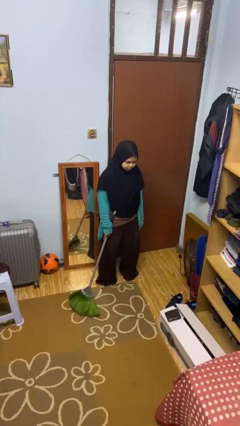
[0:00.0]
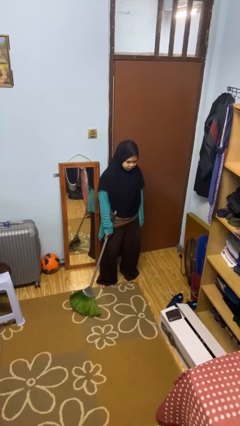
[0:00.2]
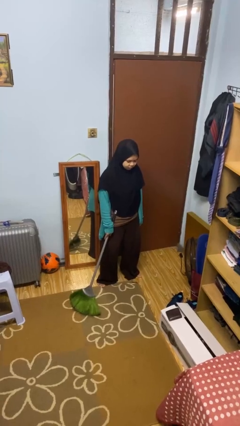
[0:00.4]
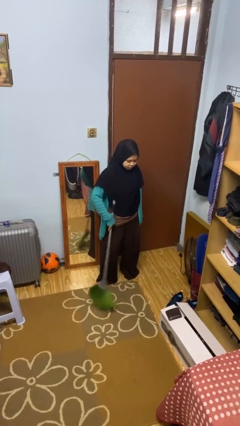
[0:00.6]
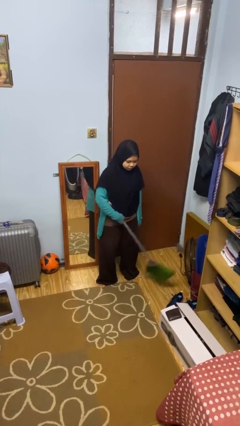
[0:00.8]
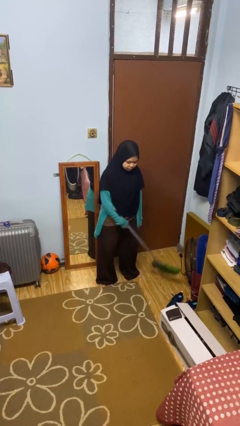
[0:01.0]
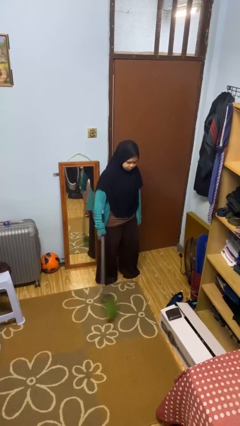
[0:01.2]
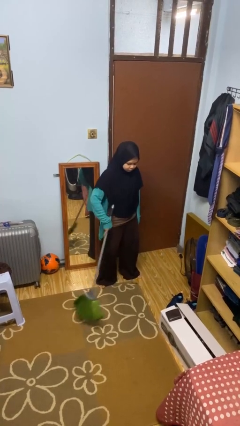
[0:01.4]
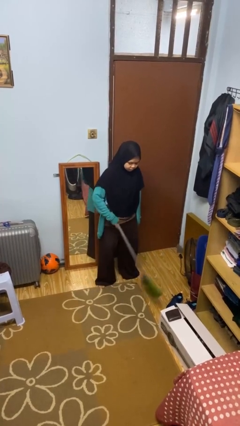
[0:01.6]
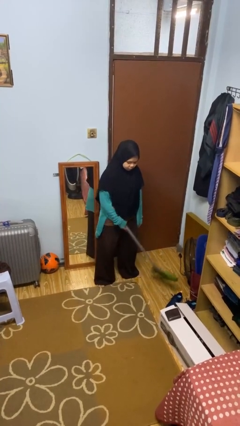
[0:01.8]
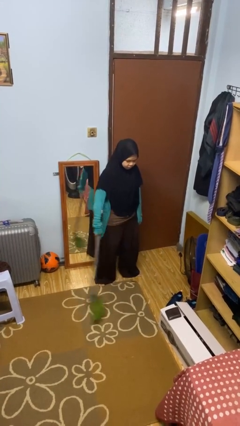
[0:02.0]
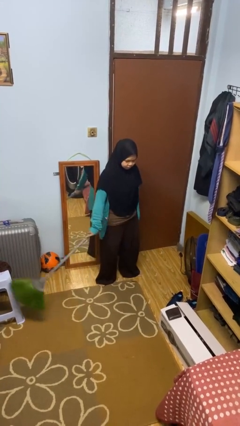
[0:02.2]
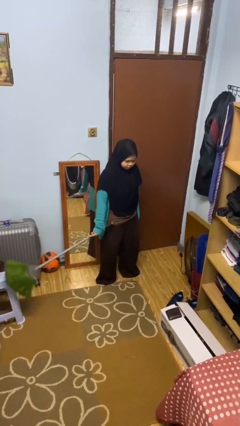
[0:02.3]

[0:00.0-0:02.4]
person sweeps floor

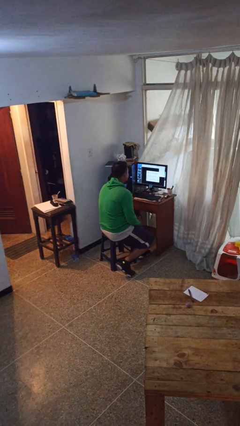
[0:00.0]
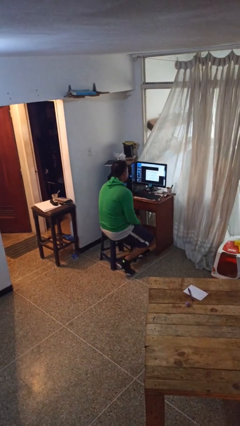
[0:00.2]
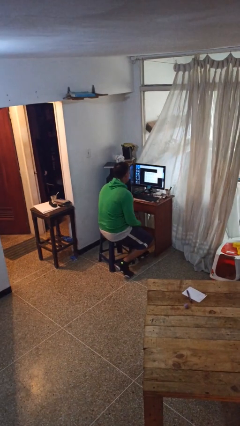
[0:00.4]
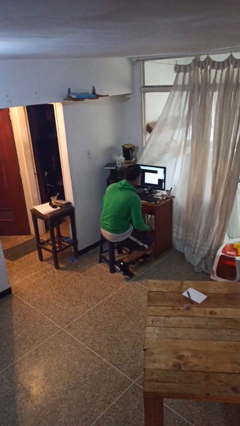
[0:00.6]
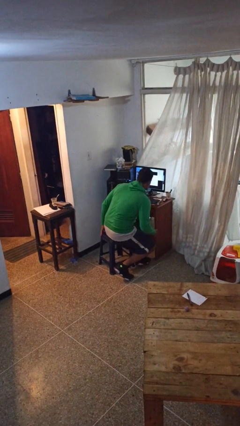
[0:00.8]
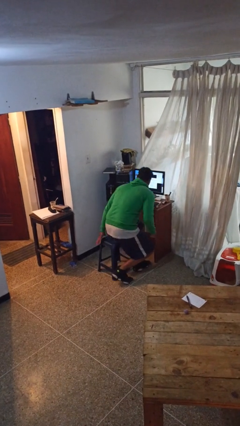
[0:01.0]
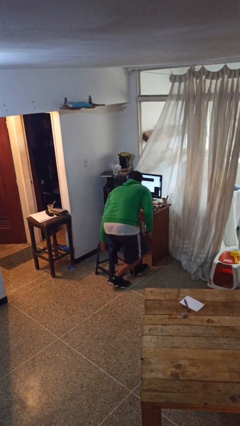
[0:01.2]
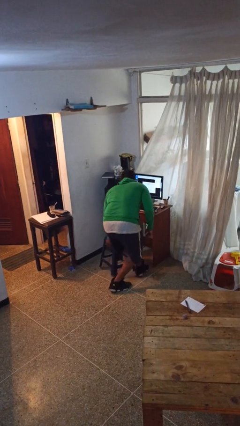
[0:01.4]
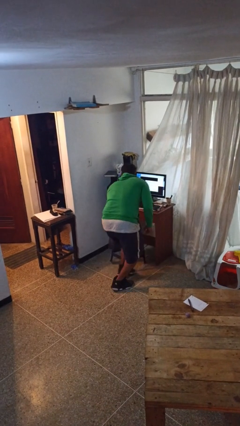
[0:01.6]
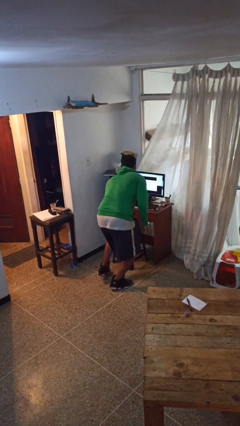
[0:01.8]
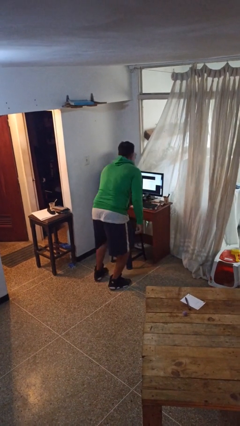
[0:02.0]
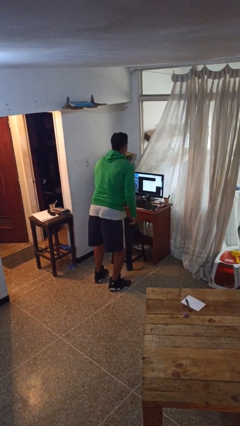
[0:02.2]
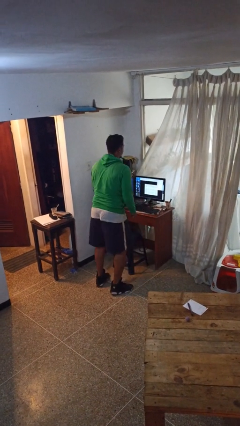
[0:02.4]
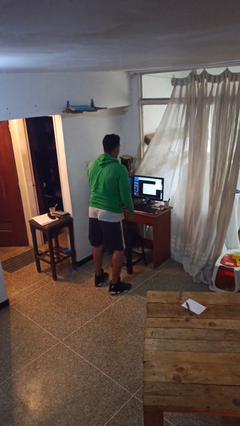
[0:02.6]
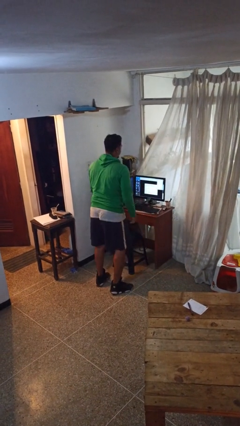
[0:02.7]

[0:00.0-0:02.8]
person stands up

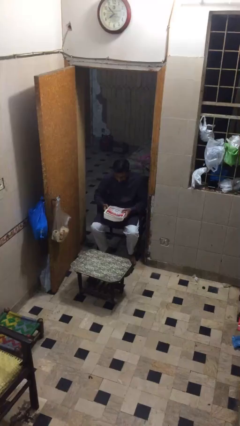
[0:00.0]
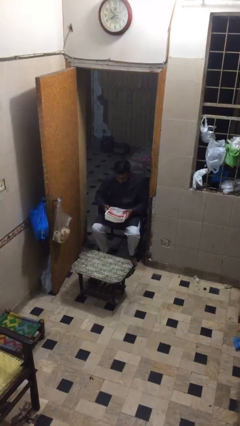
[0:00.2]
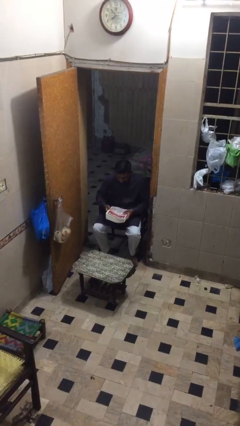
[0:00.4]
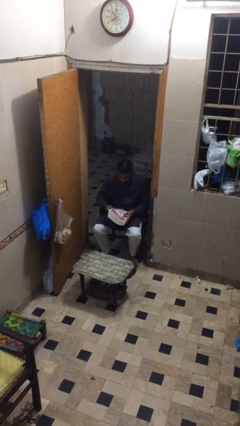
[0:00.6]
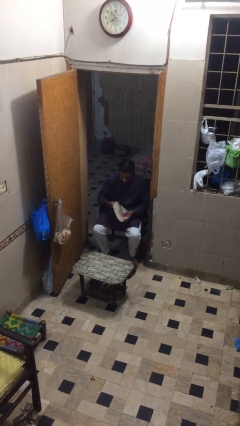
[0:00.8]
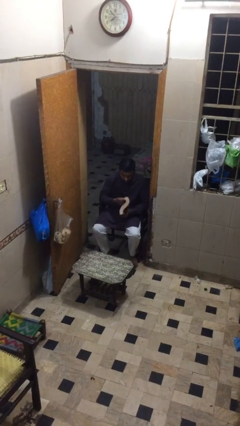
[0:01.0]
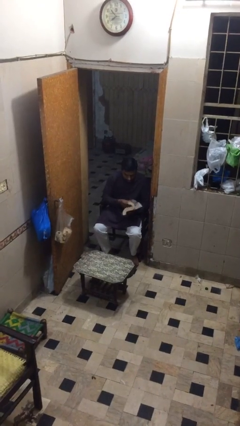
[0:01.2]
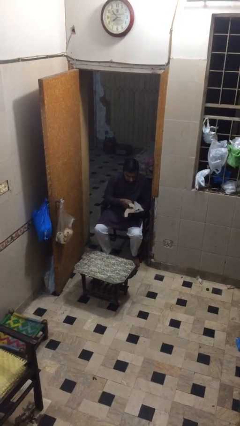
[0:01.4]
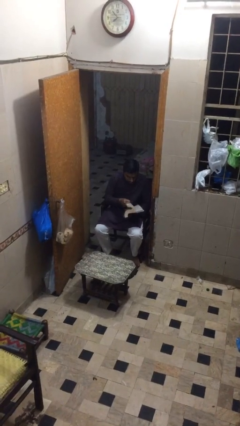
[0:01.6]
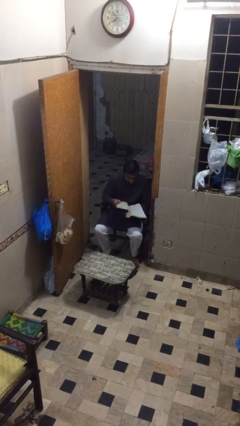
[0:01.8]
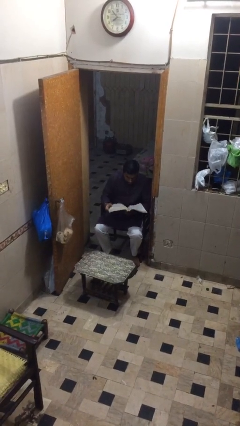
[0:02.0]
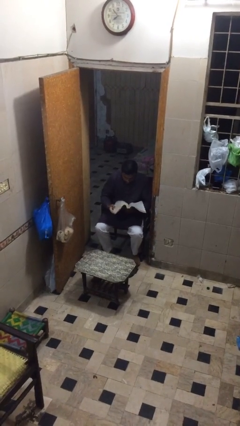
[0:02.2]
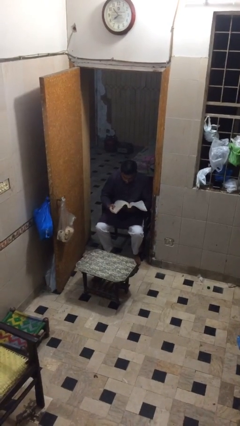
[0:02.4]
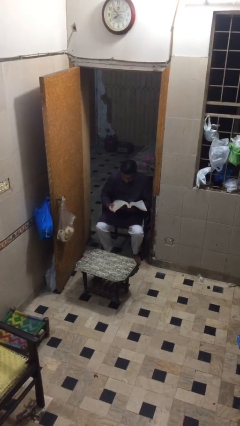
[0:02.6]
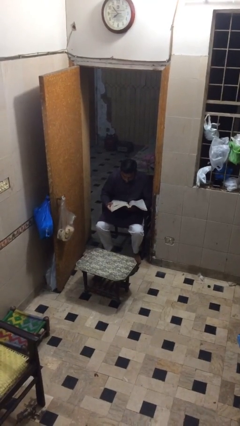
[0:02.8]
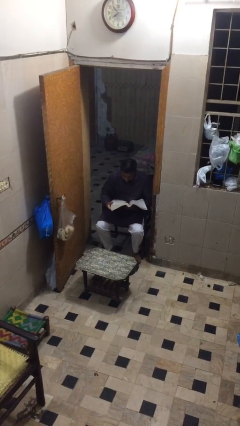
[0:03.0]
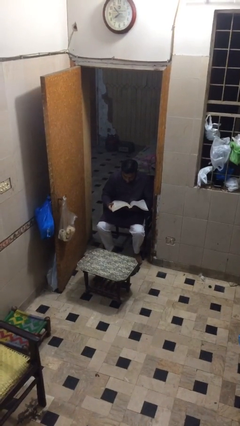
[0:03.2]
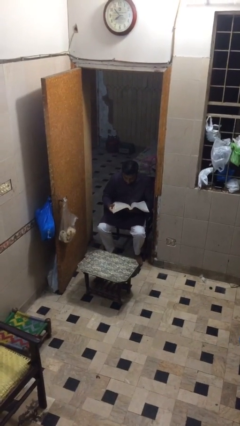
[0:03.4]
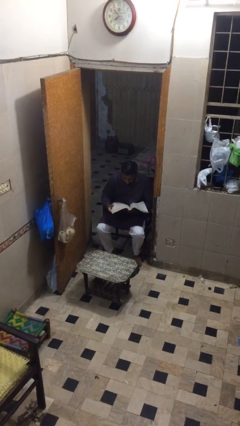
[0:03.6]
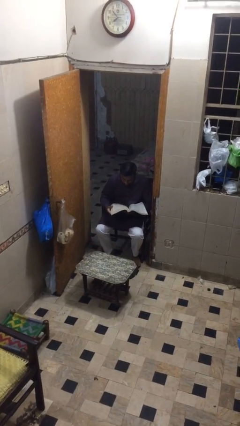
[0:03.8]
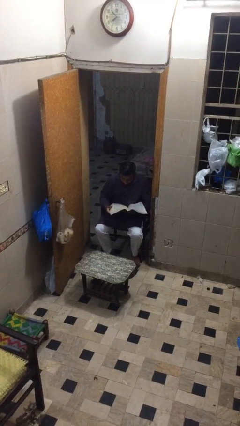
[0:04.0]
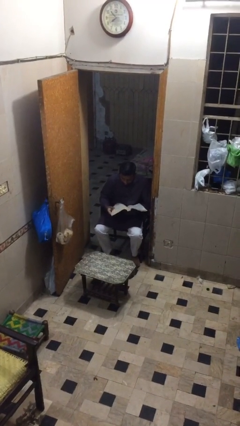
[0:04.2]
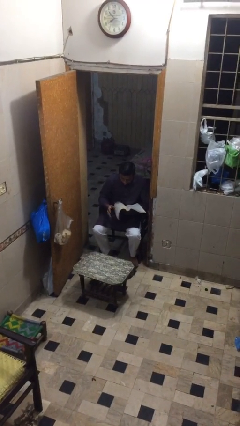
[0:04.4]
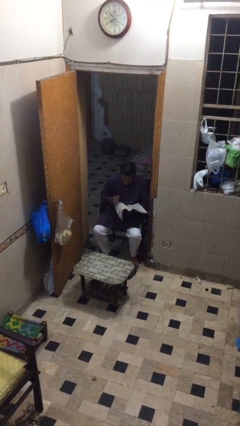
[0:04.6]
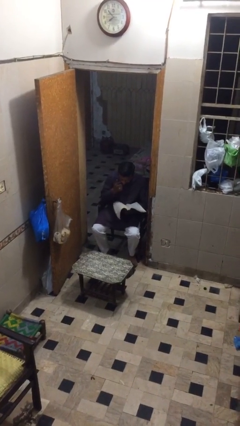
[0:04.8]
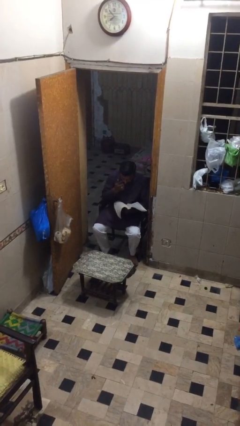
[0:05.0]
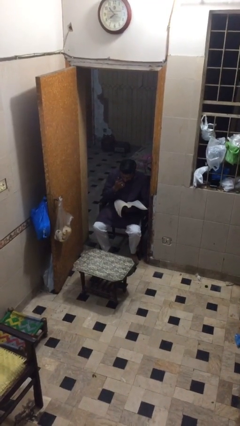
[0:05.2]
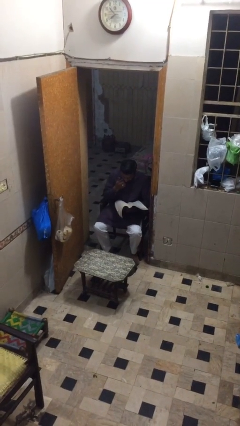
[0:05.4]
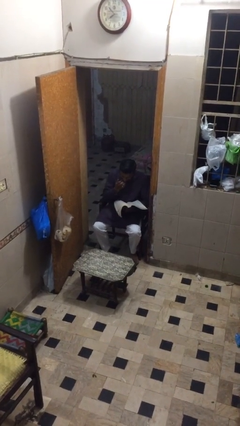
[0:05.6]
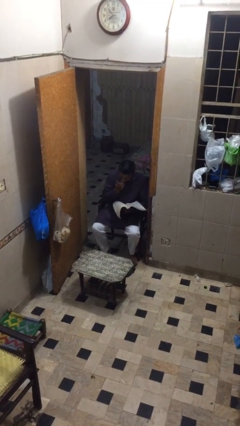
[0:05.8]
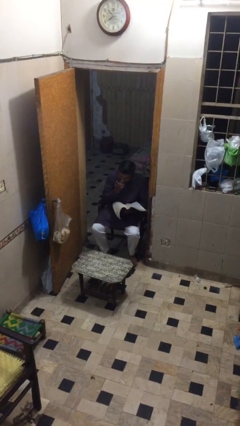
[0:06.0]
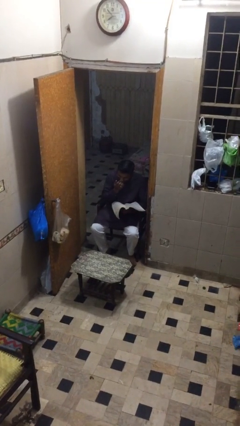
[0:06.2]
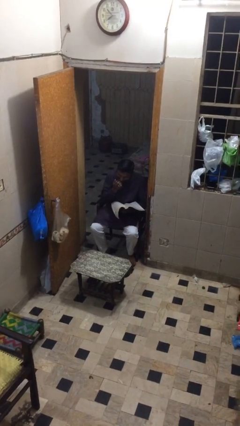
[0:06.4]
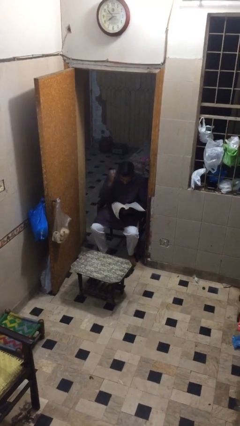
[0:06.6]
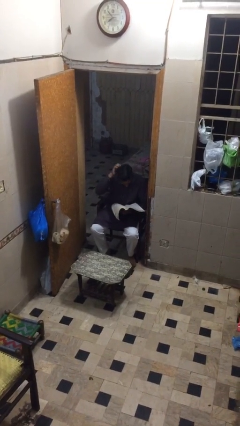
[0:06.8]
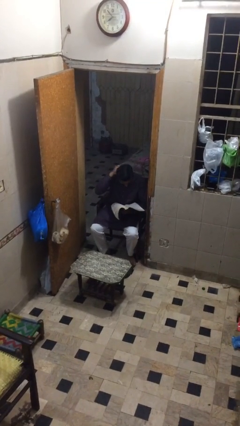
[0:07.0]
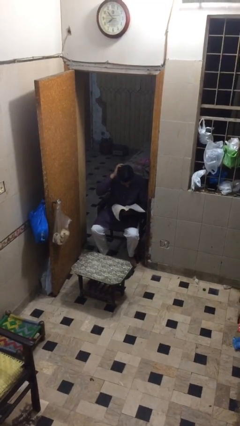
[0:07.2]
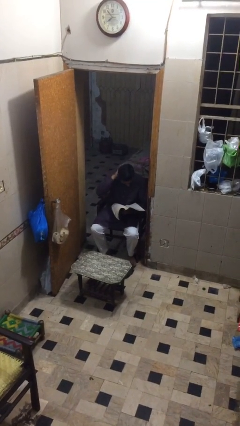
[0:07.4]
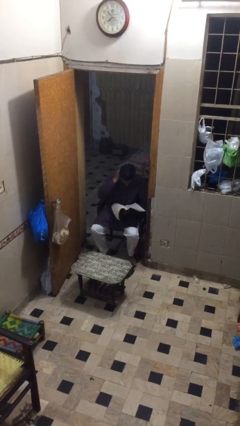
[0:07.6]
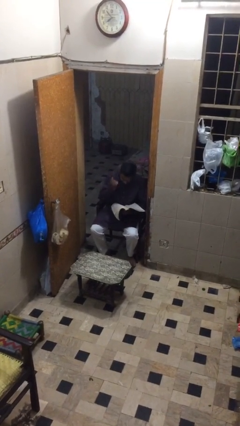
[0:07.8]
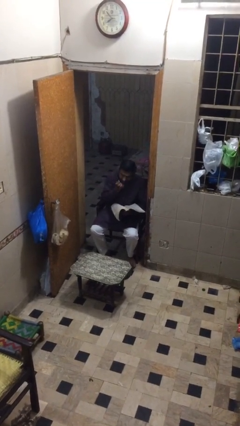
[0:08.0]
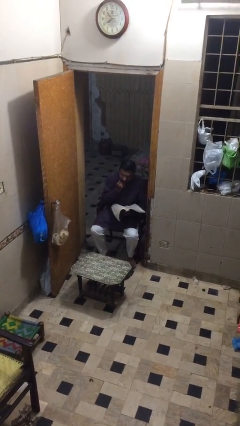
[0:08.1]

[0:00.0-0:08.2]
person reads document

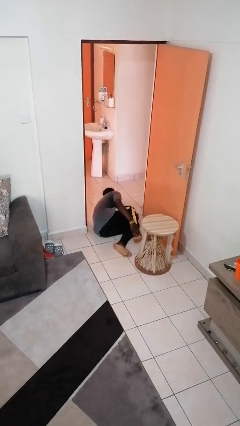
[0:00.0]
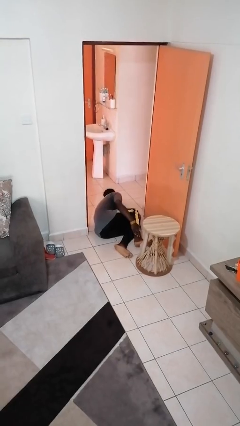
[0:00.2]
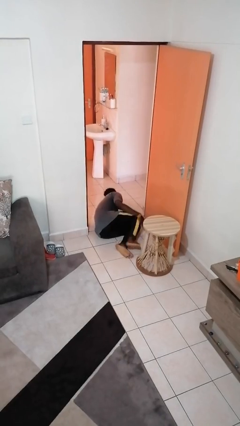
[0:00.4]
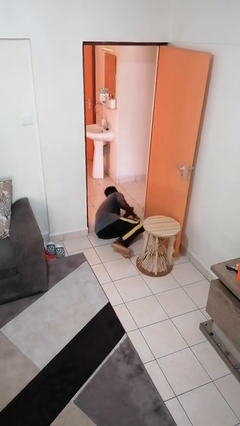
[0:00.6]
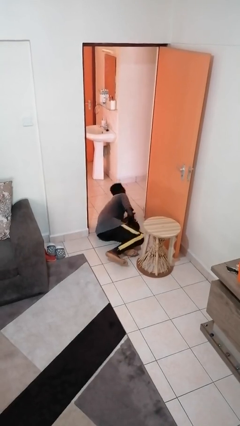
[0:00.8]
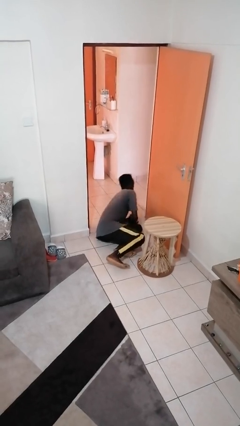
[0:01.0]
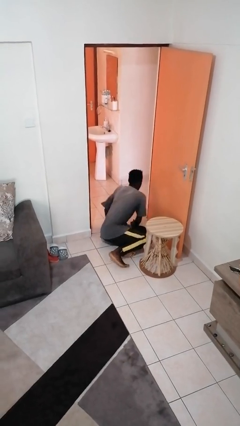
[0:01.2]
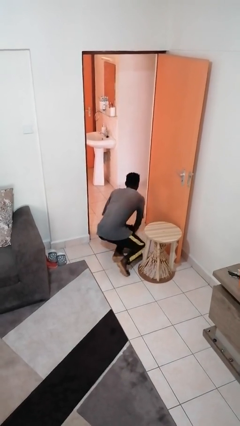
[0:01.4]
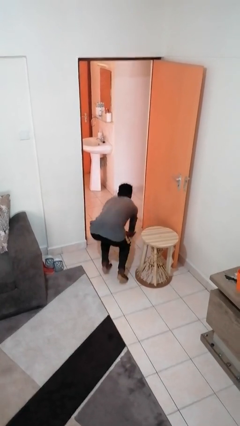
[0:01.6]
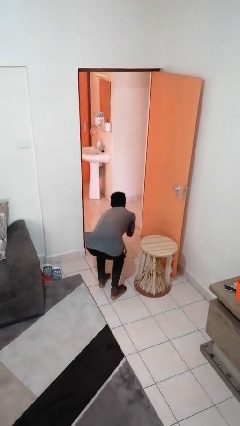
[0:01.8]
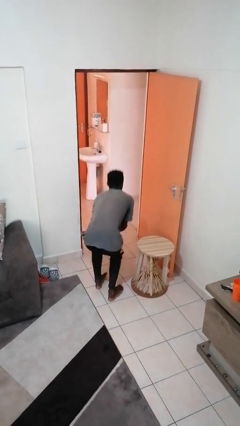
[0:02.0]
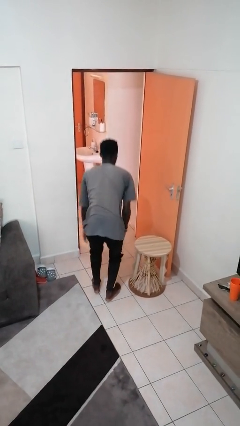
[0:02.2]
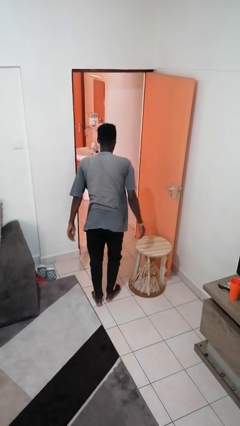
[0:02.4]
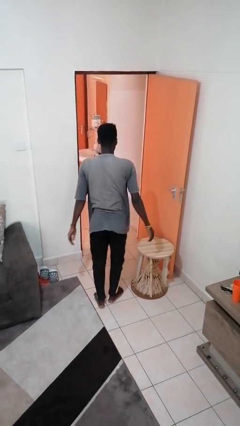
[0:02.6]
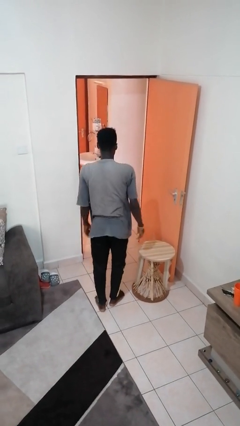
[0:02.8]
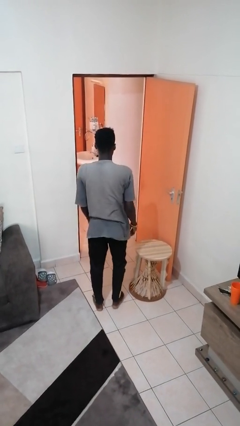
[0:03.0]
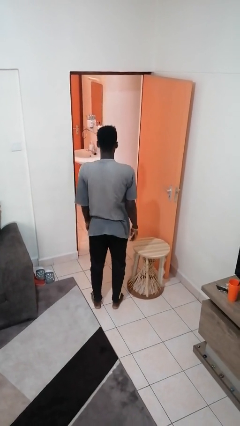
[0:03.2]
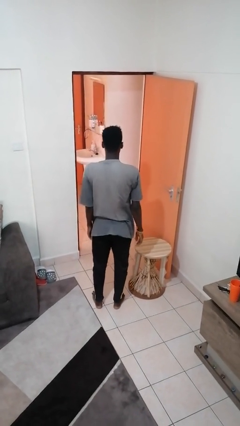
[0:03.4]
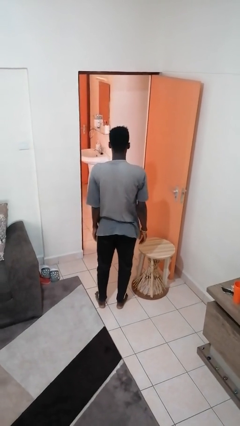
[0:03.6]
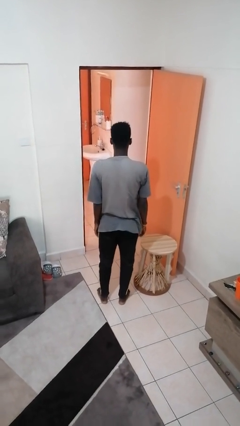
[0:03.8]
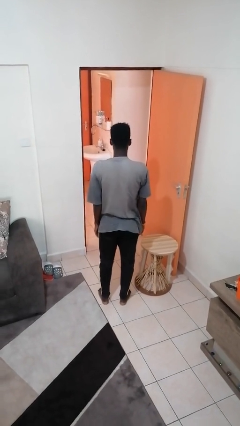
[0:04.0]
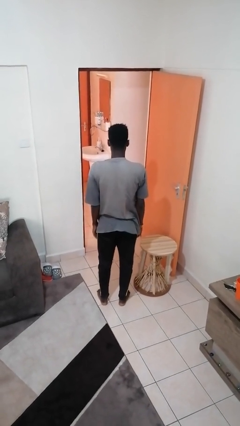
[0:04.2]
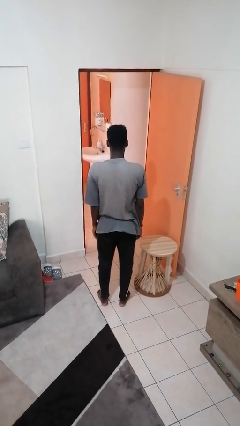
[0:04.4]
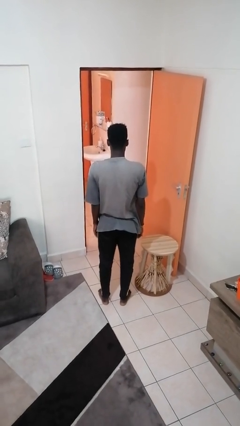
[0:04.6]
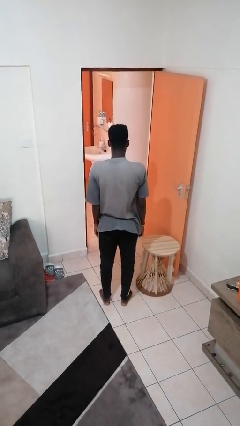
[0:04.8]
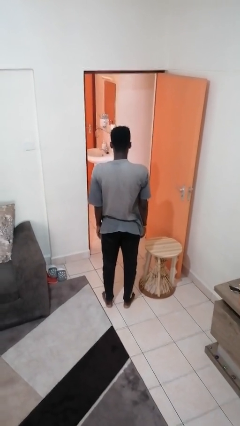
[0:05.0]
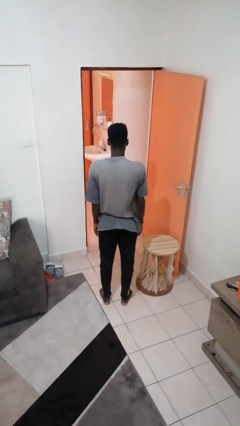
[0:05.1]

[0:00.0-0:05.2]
person stands up from floor
